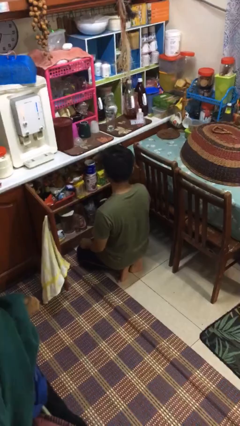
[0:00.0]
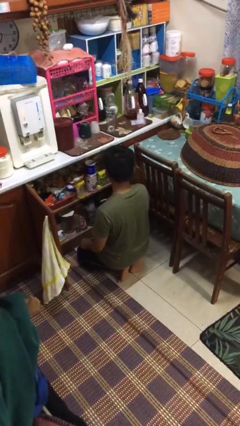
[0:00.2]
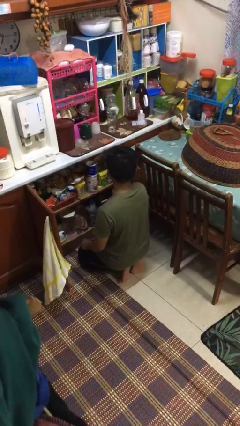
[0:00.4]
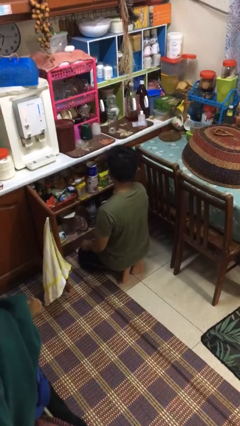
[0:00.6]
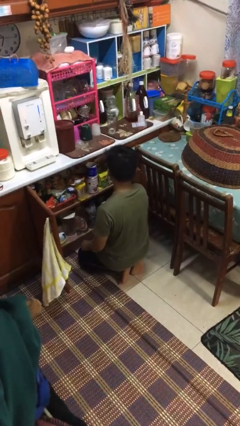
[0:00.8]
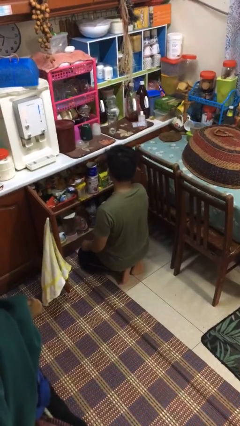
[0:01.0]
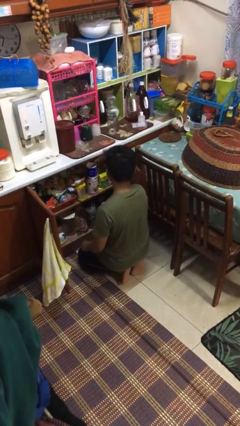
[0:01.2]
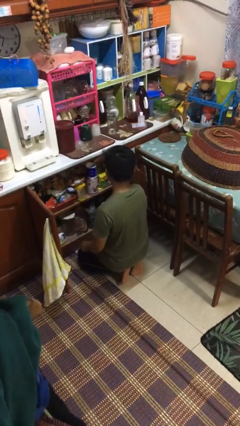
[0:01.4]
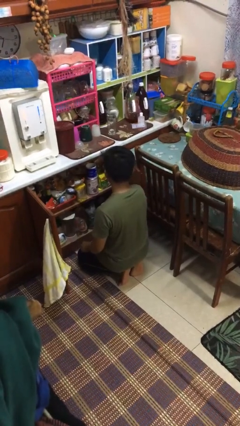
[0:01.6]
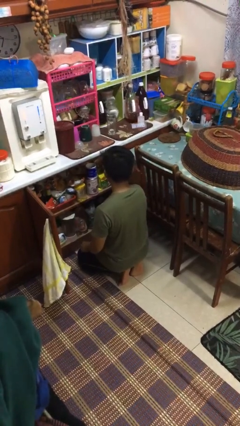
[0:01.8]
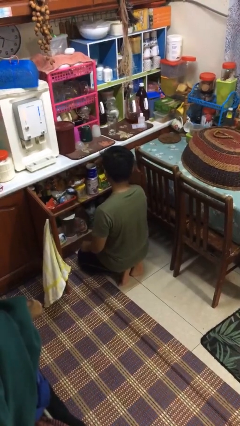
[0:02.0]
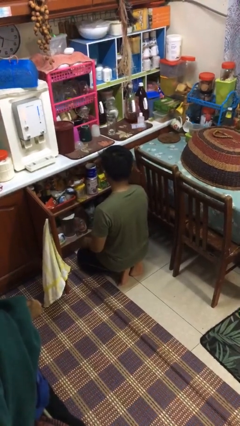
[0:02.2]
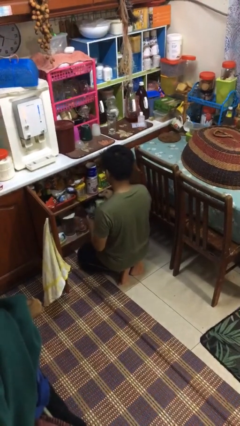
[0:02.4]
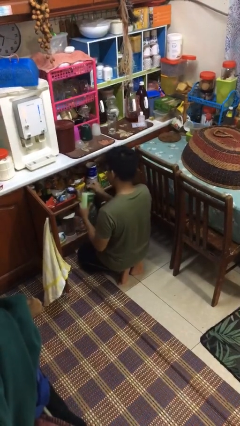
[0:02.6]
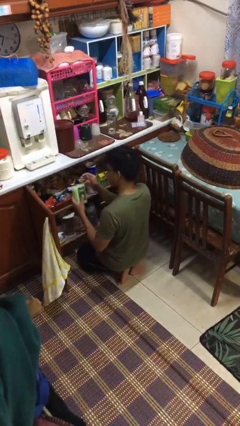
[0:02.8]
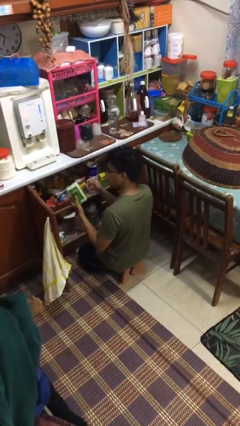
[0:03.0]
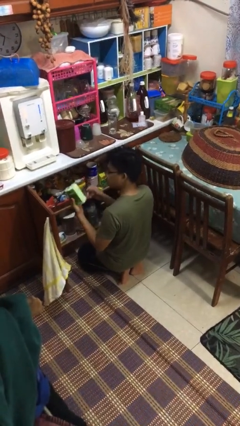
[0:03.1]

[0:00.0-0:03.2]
person takes object from cabinet

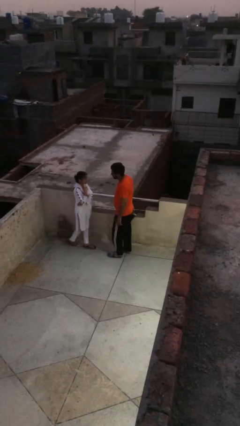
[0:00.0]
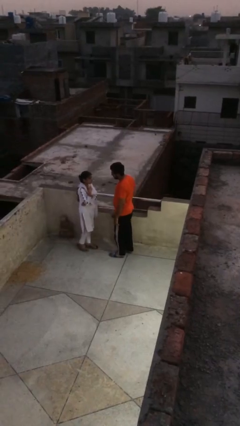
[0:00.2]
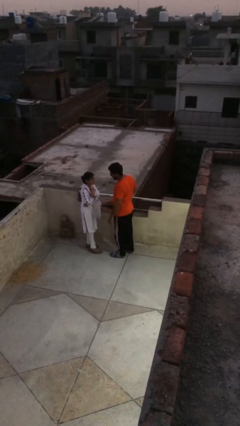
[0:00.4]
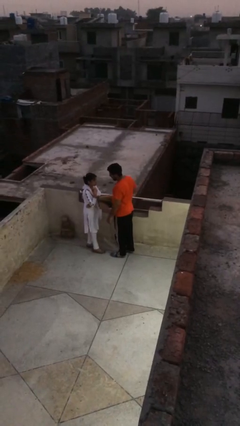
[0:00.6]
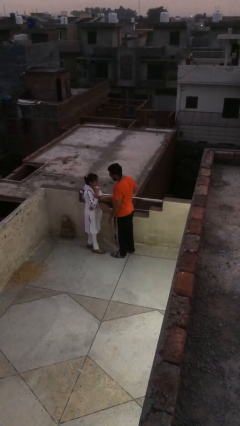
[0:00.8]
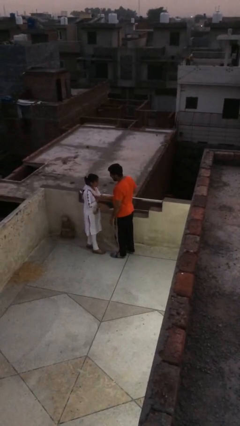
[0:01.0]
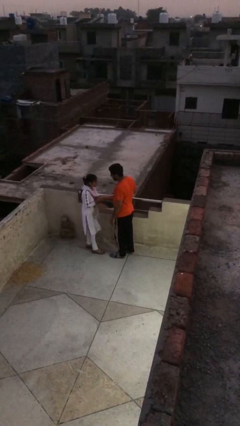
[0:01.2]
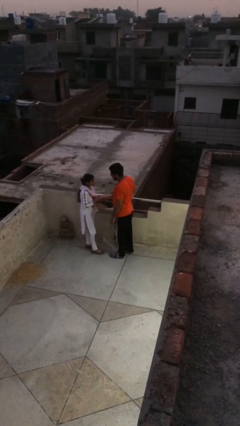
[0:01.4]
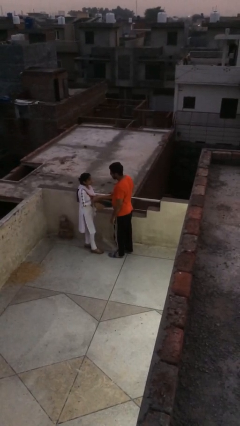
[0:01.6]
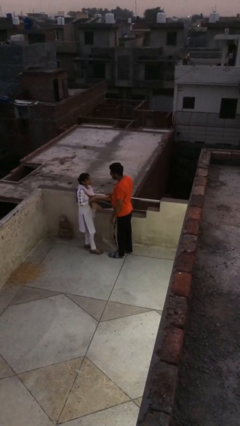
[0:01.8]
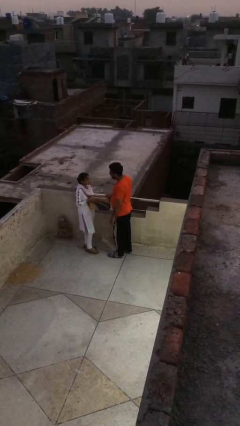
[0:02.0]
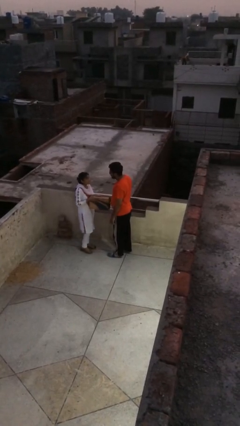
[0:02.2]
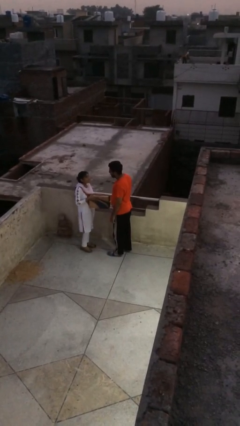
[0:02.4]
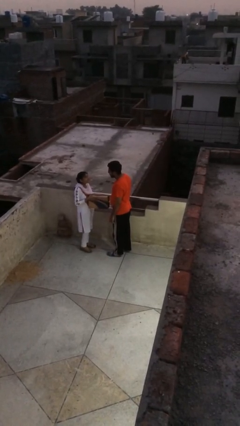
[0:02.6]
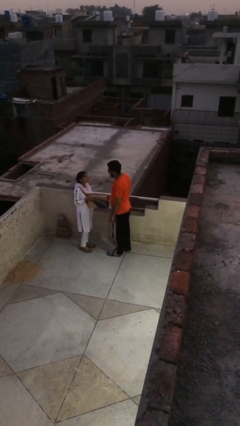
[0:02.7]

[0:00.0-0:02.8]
person transfers object to person

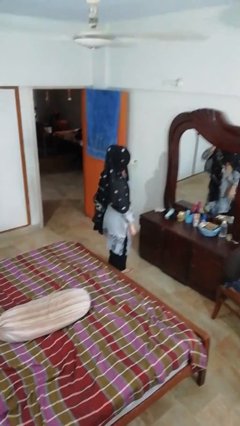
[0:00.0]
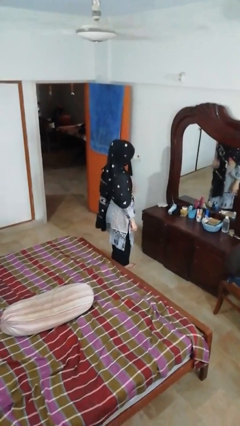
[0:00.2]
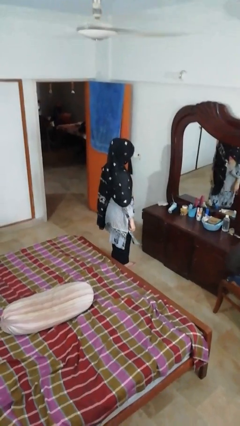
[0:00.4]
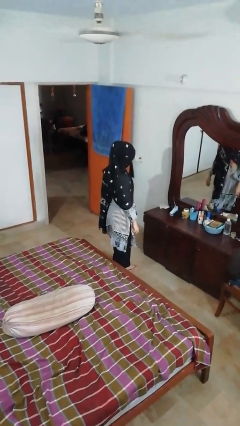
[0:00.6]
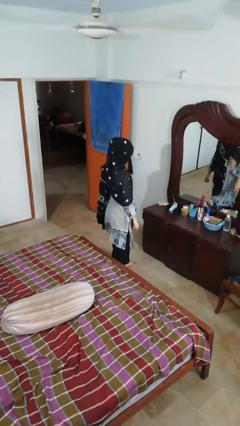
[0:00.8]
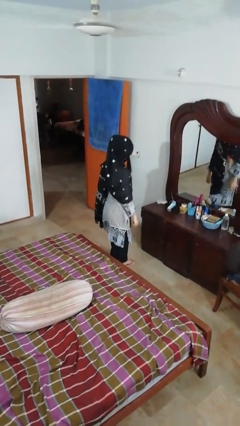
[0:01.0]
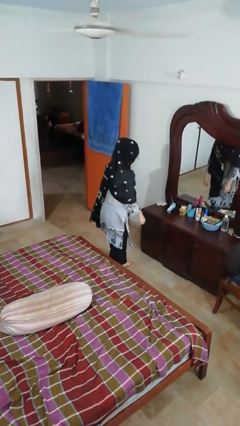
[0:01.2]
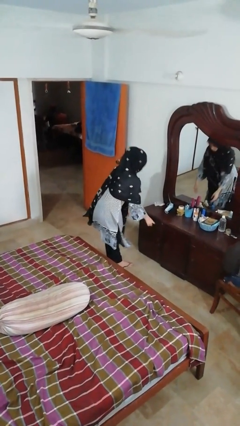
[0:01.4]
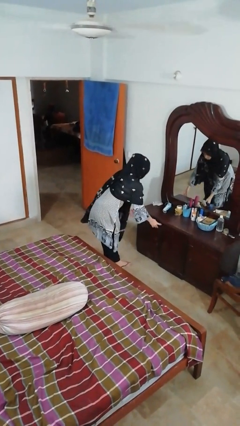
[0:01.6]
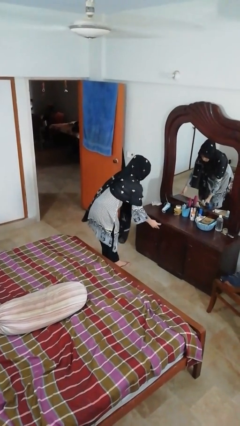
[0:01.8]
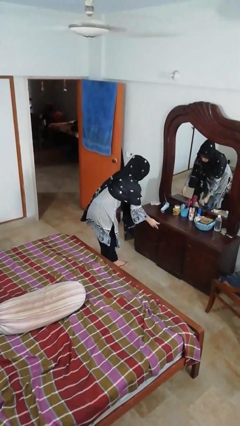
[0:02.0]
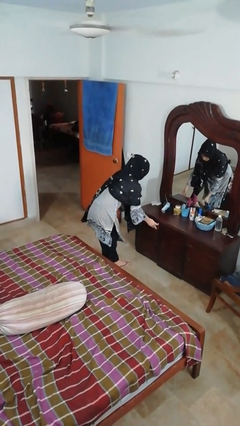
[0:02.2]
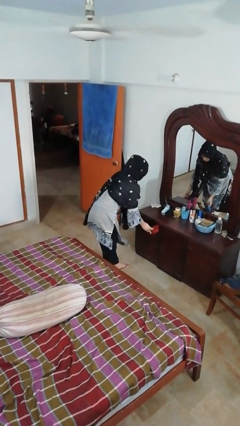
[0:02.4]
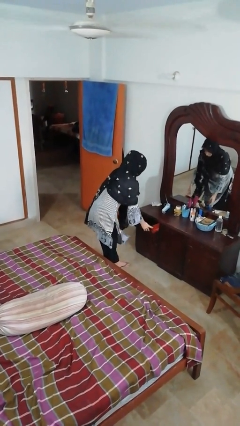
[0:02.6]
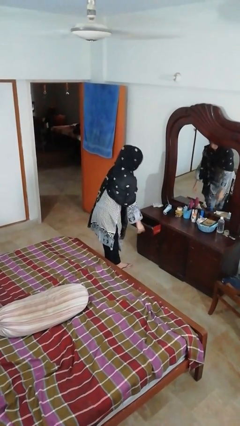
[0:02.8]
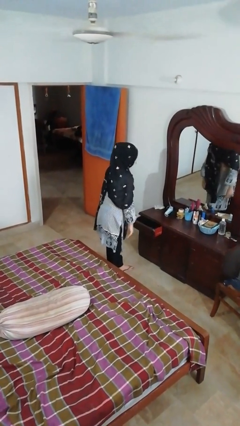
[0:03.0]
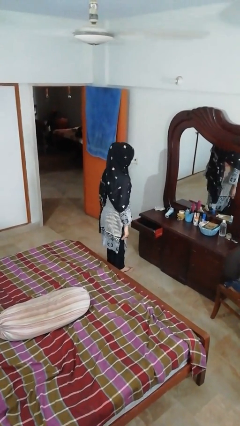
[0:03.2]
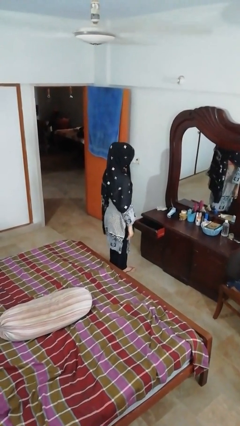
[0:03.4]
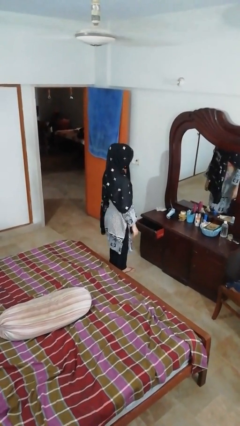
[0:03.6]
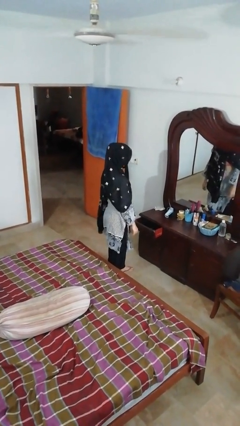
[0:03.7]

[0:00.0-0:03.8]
person opens dresser drawer

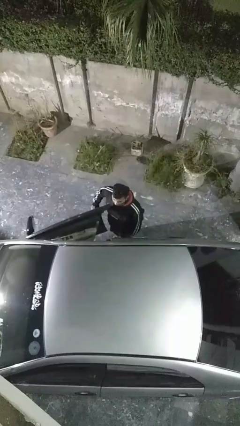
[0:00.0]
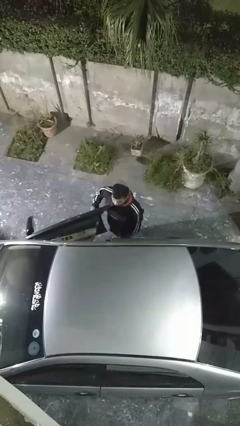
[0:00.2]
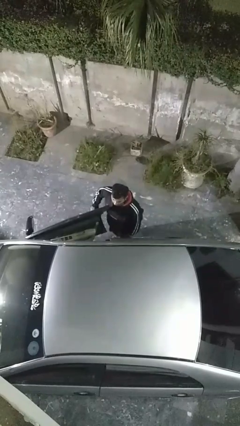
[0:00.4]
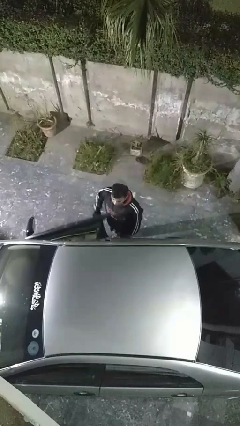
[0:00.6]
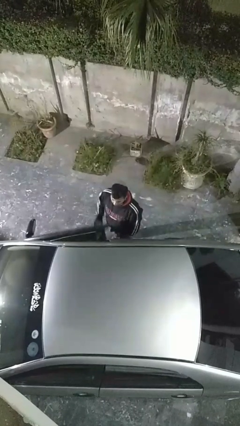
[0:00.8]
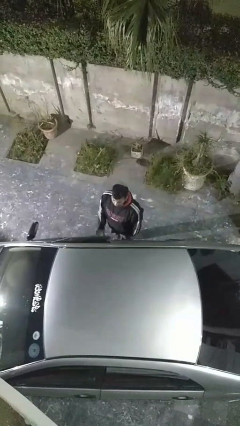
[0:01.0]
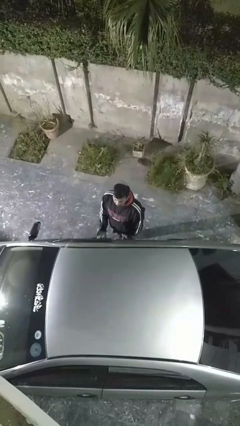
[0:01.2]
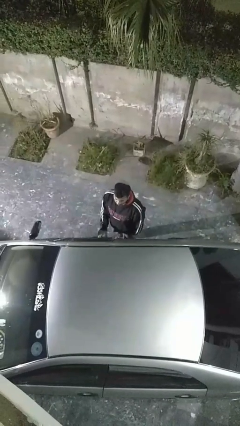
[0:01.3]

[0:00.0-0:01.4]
person closes car door

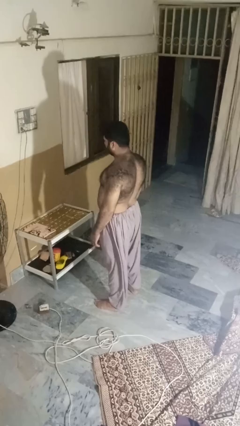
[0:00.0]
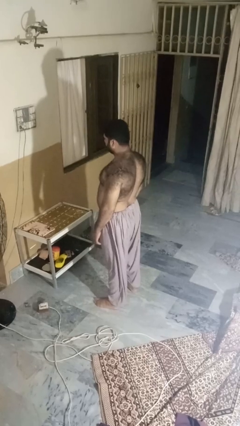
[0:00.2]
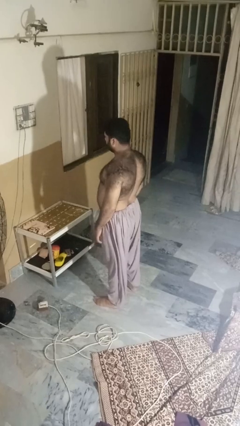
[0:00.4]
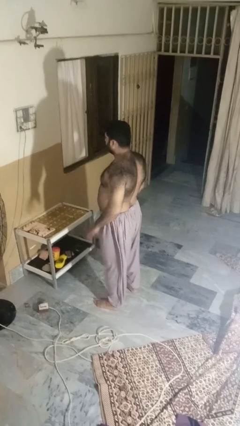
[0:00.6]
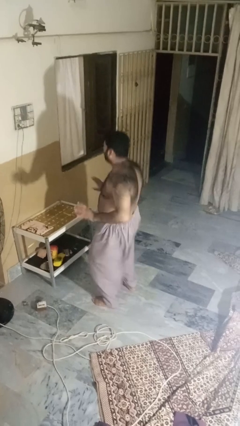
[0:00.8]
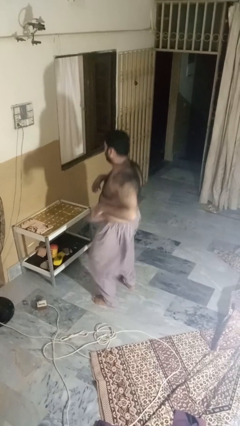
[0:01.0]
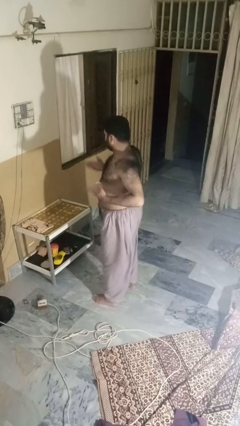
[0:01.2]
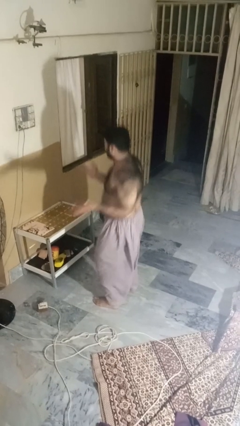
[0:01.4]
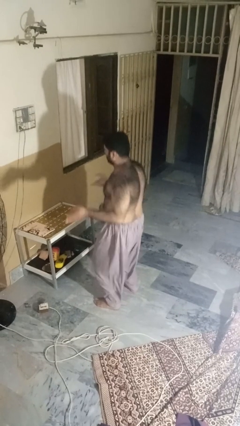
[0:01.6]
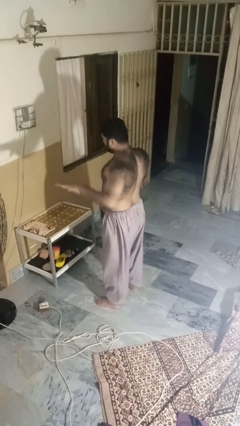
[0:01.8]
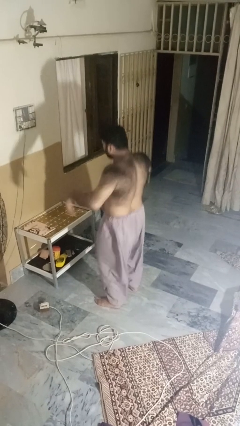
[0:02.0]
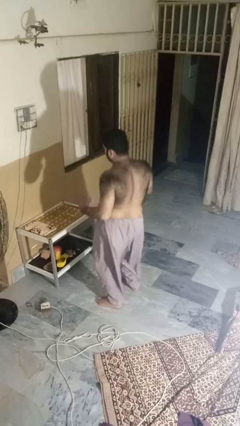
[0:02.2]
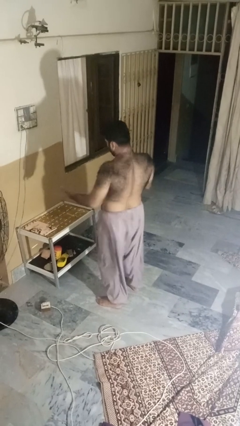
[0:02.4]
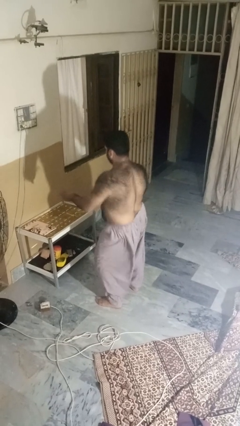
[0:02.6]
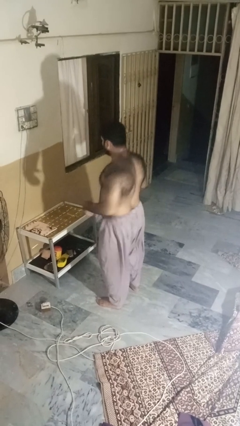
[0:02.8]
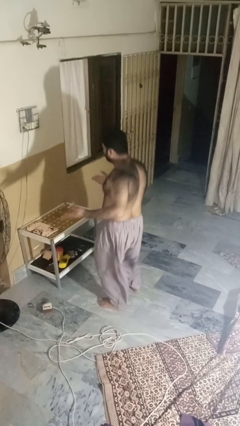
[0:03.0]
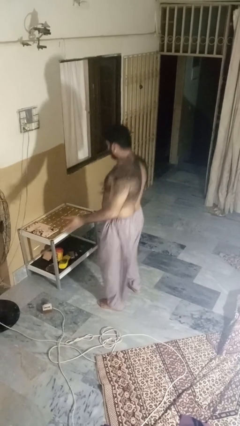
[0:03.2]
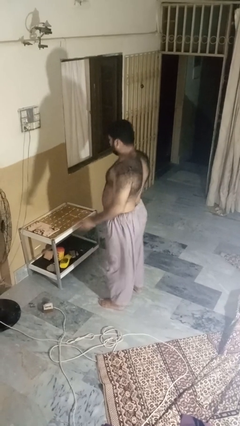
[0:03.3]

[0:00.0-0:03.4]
person dances in place

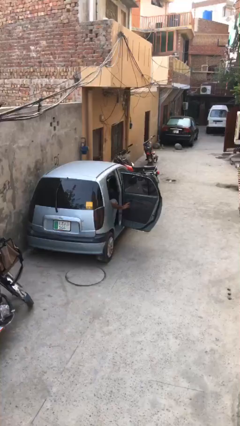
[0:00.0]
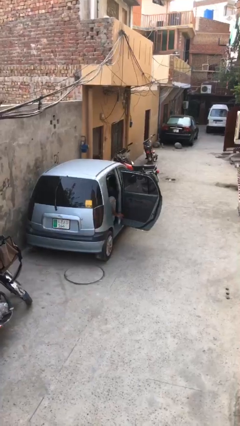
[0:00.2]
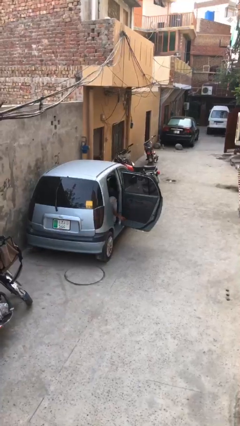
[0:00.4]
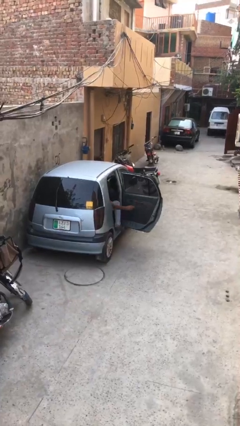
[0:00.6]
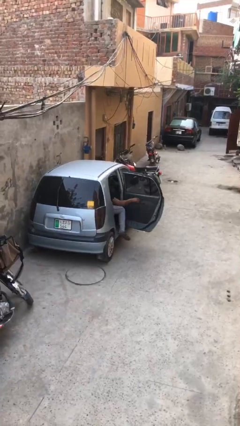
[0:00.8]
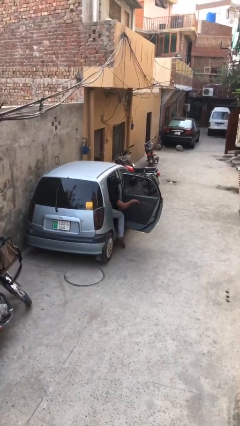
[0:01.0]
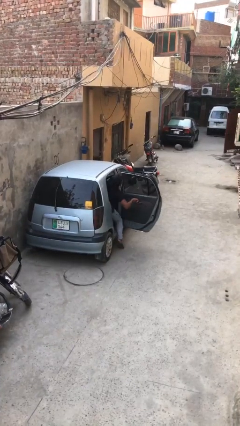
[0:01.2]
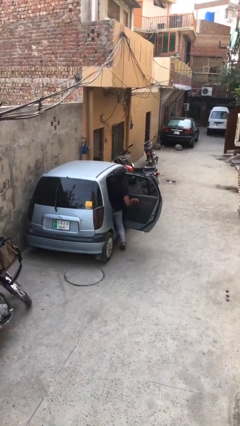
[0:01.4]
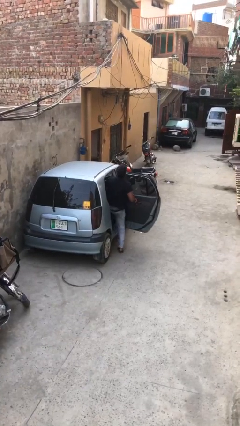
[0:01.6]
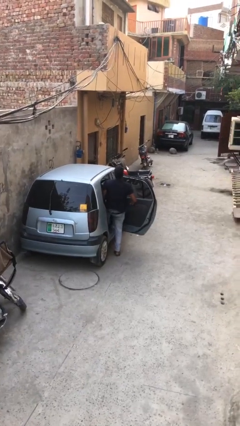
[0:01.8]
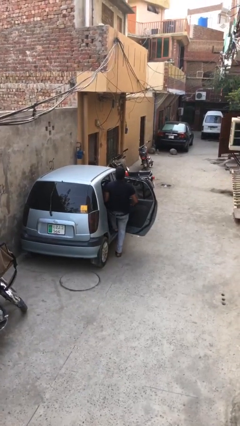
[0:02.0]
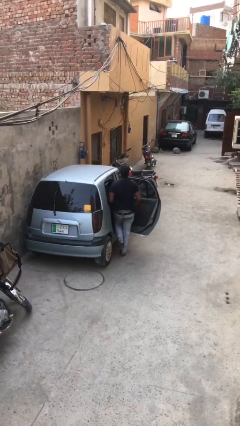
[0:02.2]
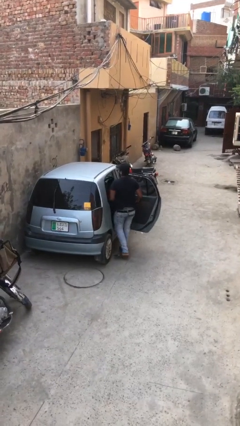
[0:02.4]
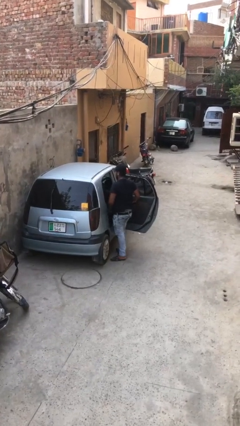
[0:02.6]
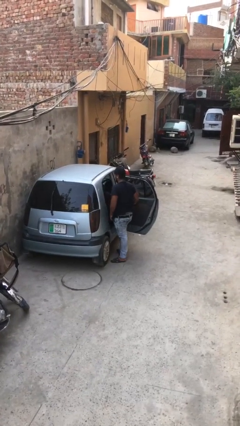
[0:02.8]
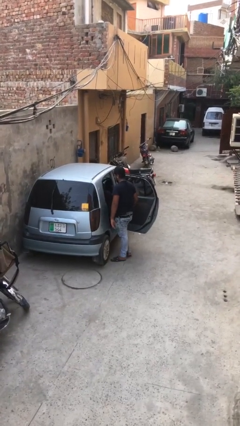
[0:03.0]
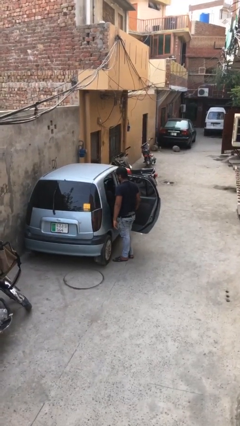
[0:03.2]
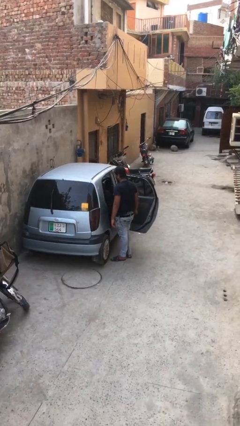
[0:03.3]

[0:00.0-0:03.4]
person exits car
